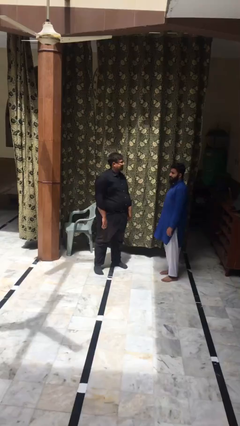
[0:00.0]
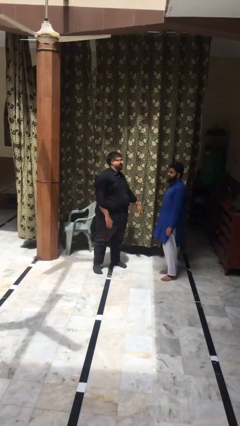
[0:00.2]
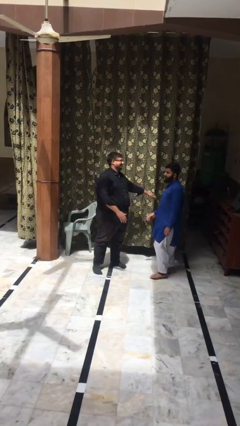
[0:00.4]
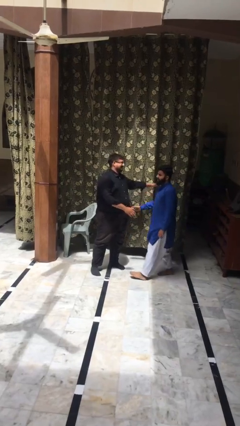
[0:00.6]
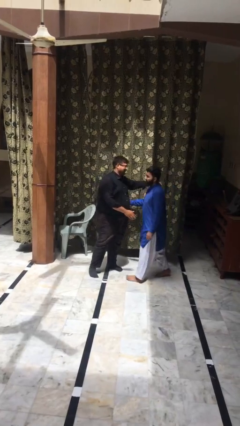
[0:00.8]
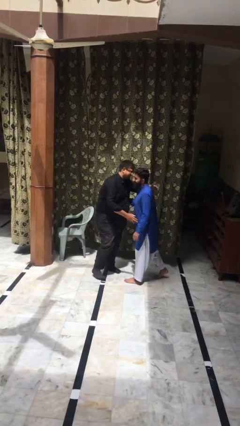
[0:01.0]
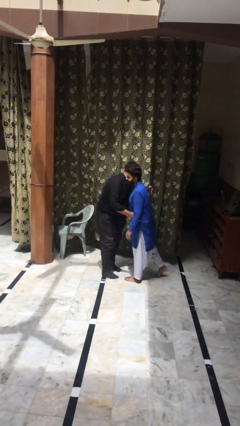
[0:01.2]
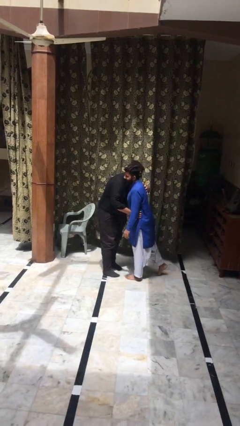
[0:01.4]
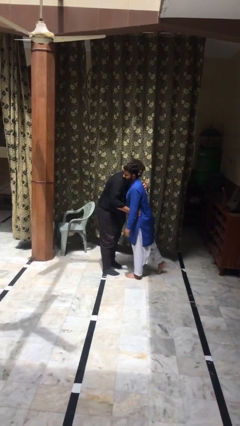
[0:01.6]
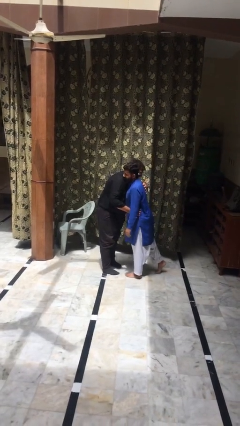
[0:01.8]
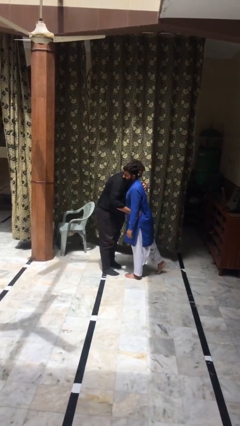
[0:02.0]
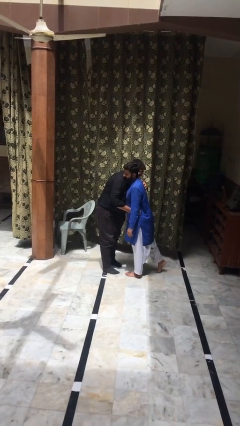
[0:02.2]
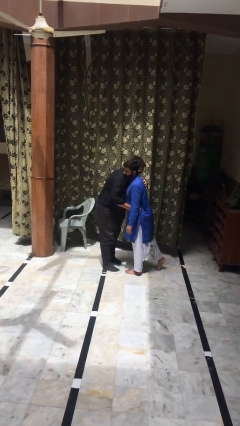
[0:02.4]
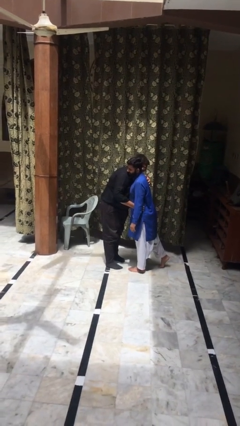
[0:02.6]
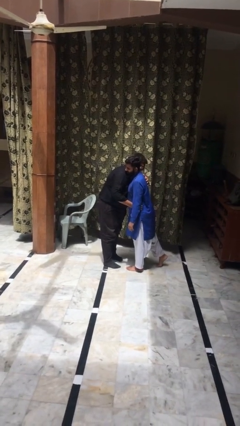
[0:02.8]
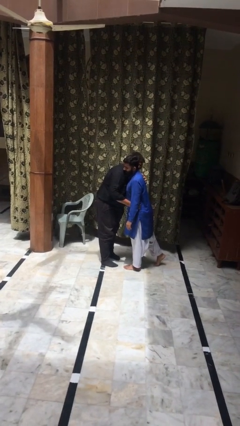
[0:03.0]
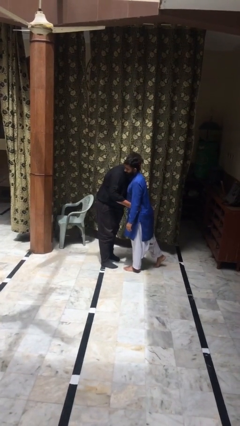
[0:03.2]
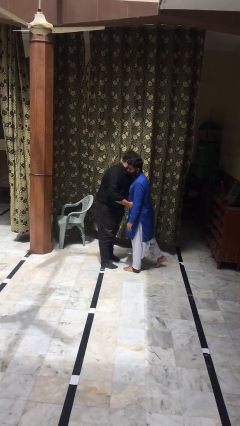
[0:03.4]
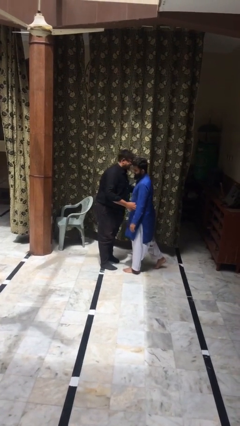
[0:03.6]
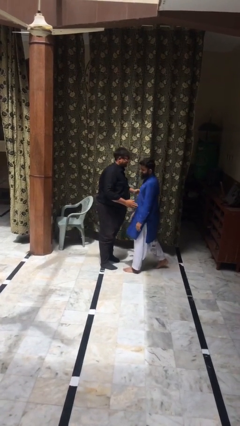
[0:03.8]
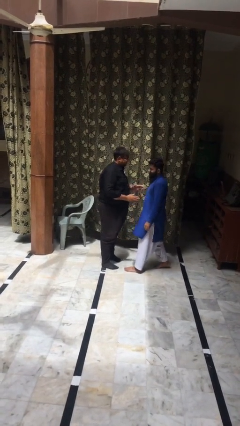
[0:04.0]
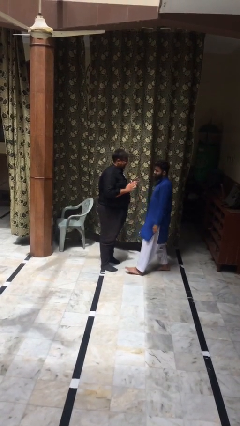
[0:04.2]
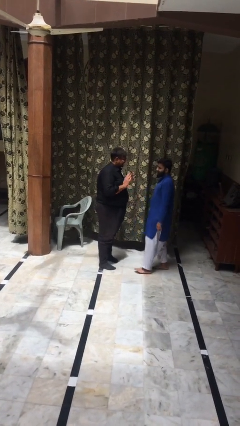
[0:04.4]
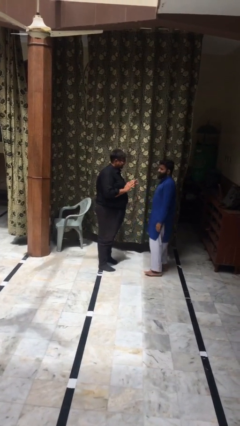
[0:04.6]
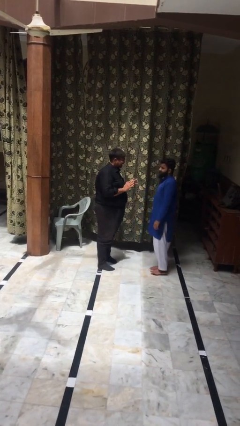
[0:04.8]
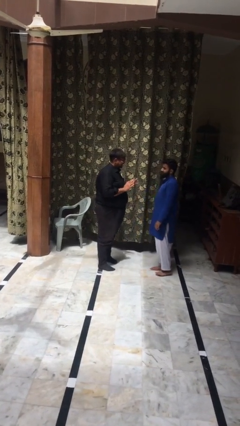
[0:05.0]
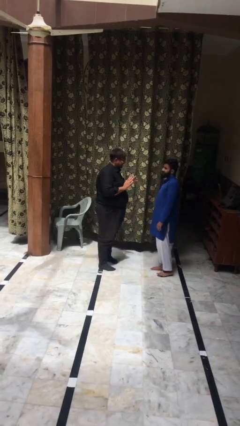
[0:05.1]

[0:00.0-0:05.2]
person embraces person

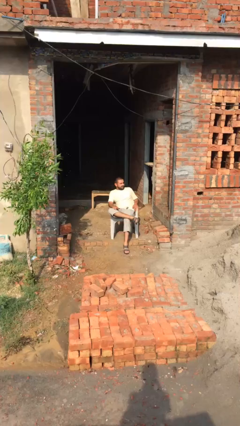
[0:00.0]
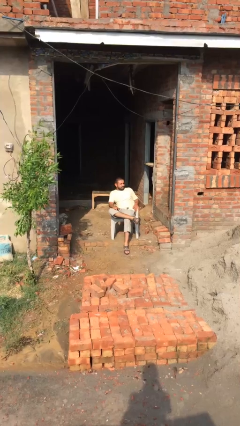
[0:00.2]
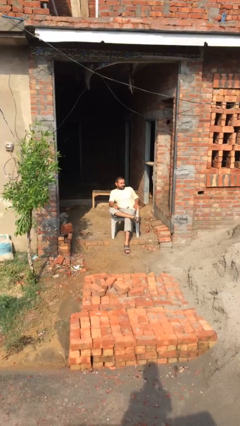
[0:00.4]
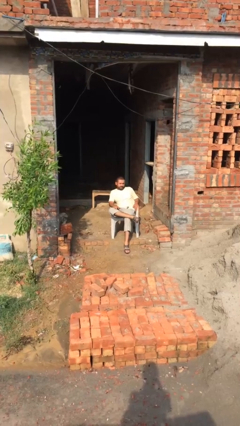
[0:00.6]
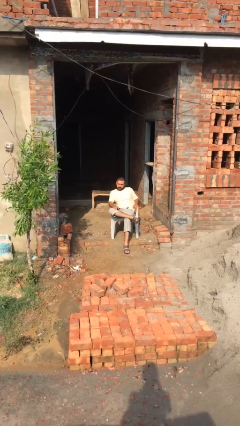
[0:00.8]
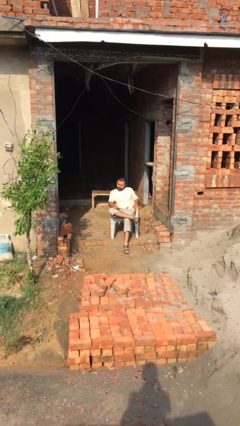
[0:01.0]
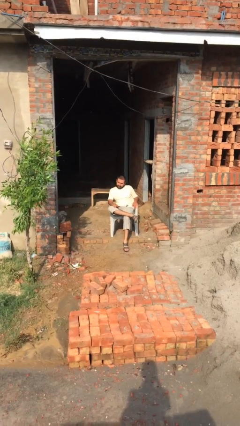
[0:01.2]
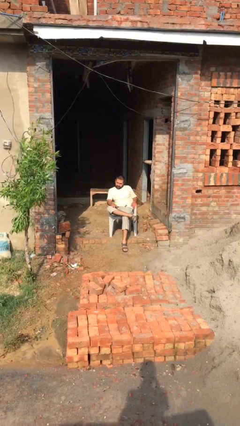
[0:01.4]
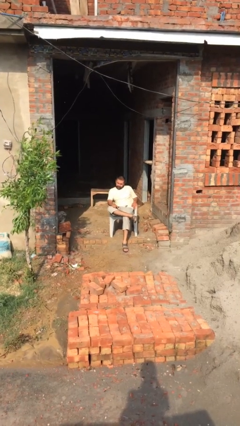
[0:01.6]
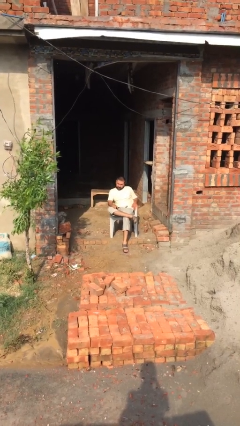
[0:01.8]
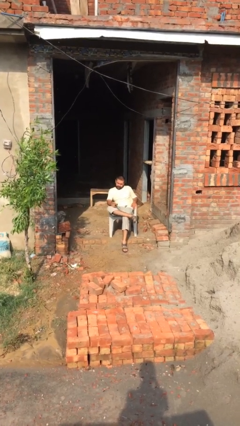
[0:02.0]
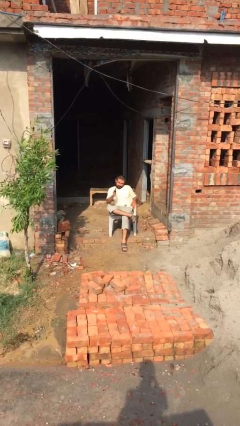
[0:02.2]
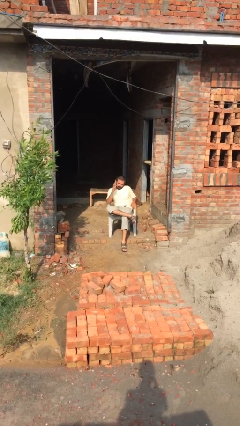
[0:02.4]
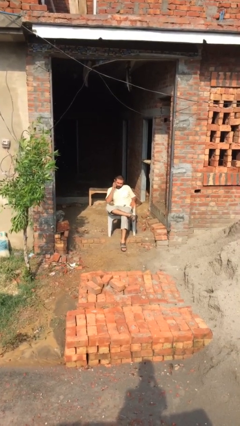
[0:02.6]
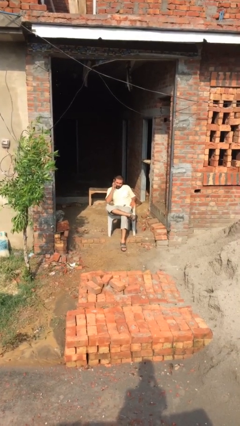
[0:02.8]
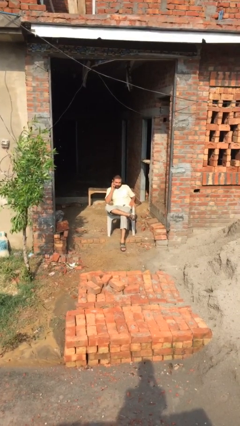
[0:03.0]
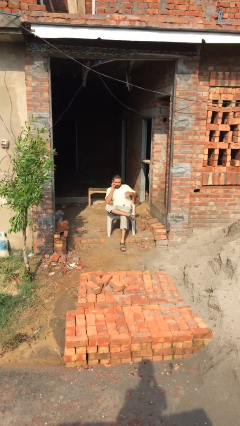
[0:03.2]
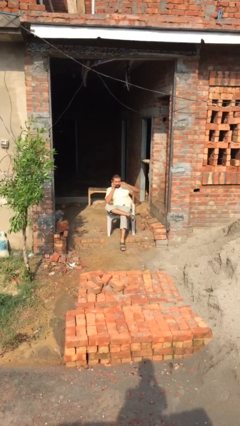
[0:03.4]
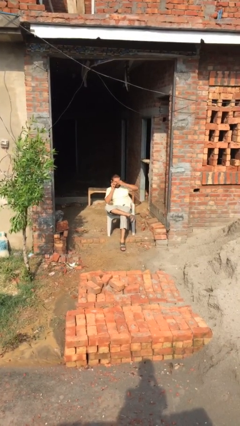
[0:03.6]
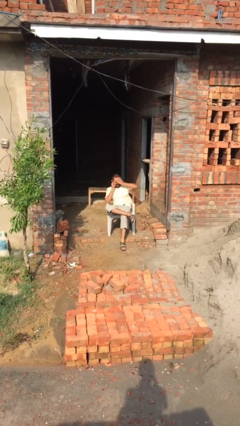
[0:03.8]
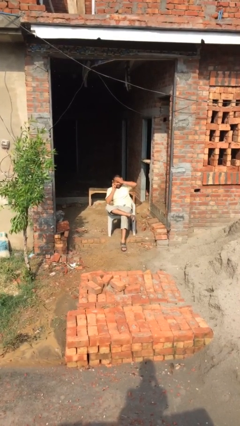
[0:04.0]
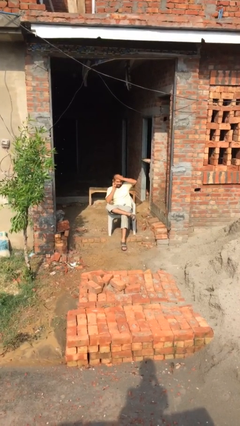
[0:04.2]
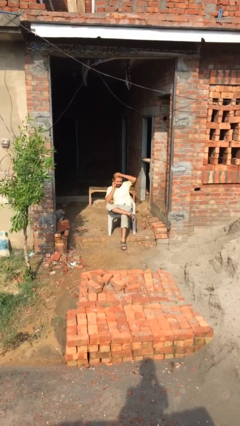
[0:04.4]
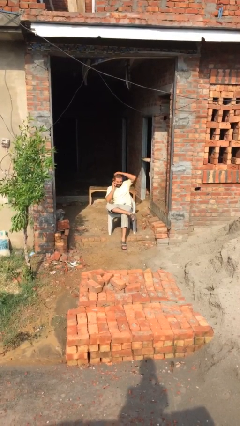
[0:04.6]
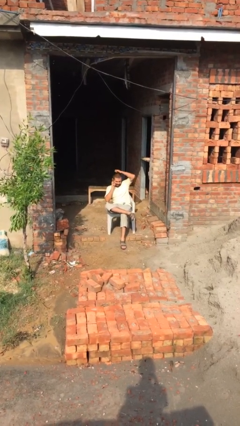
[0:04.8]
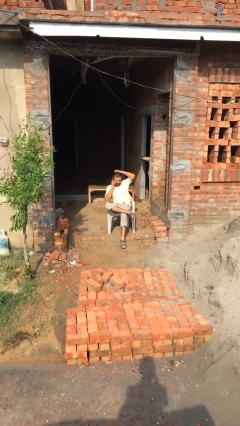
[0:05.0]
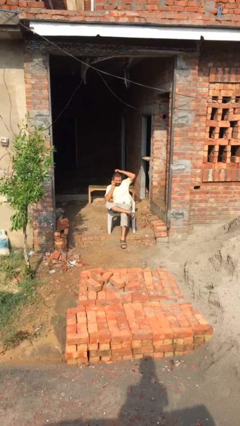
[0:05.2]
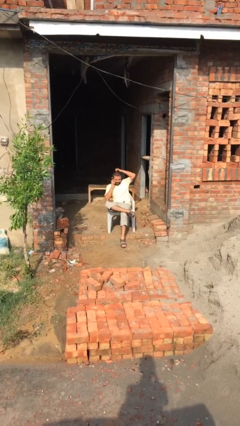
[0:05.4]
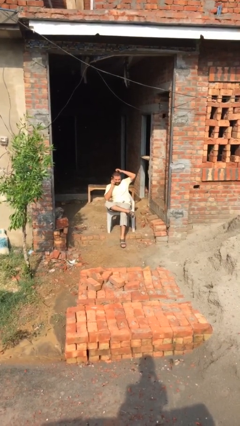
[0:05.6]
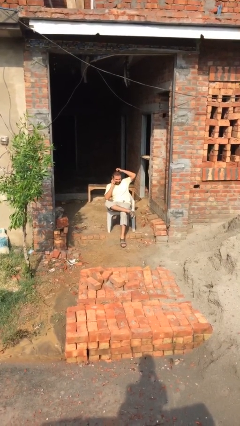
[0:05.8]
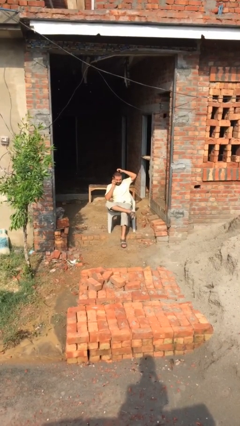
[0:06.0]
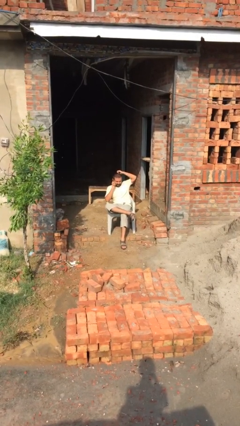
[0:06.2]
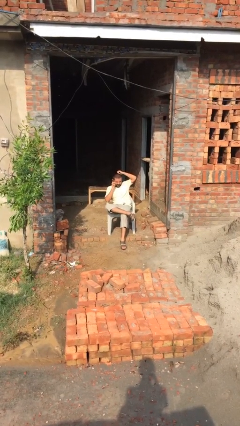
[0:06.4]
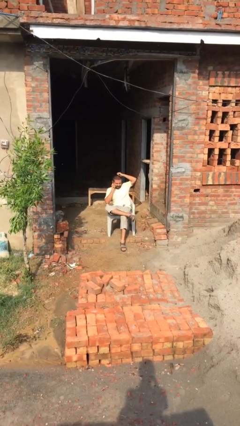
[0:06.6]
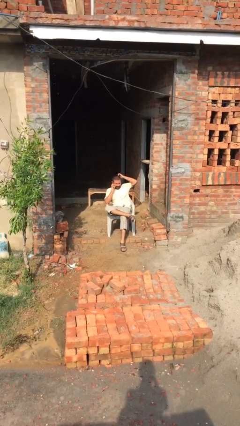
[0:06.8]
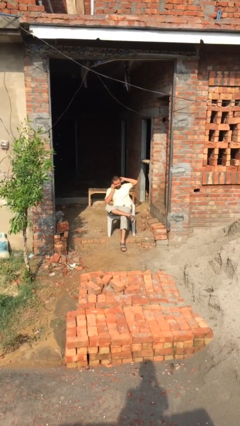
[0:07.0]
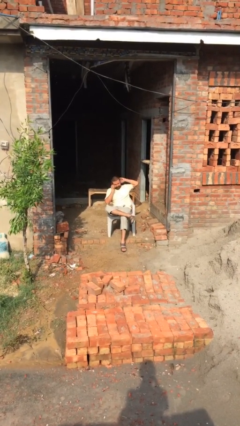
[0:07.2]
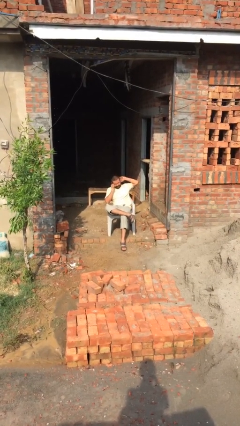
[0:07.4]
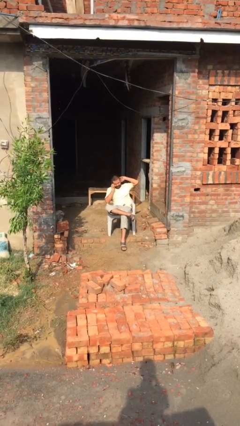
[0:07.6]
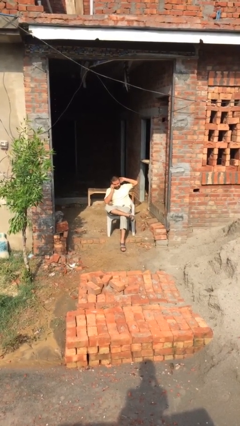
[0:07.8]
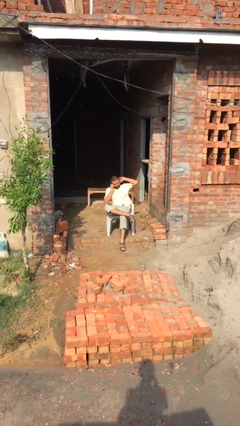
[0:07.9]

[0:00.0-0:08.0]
person talks on phone

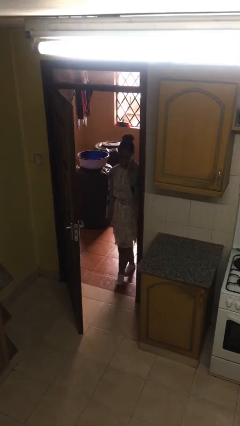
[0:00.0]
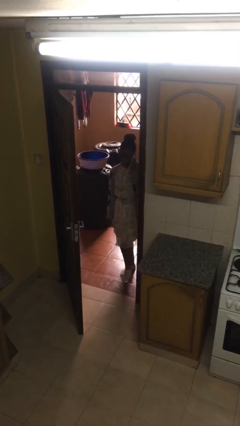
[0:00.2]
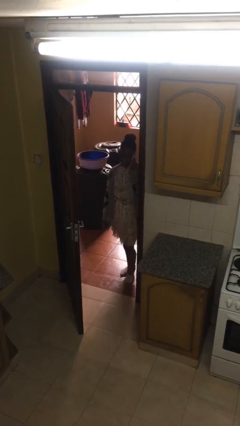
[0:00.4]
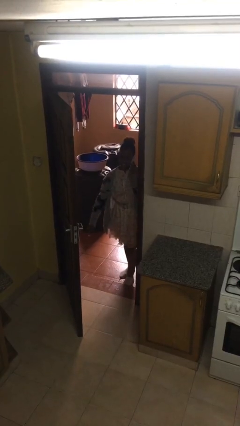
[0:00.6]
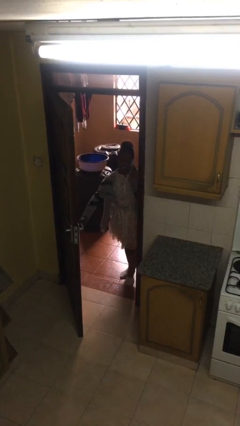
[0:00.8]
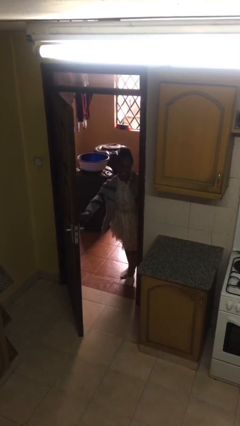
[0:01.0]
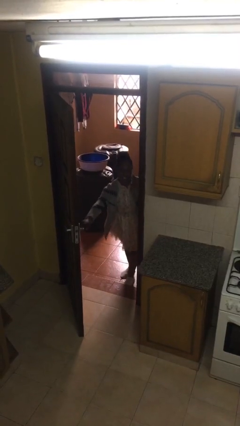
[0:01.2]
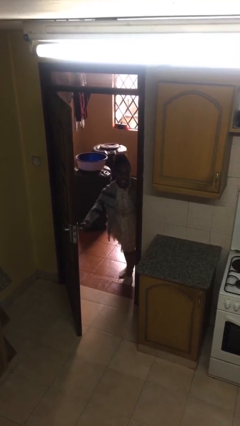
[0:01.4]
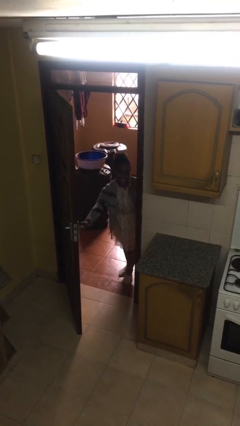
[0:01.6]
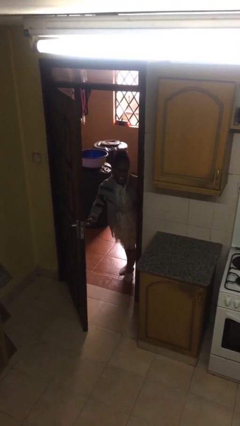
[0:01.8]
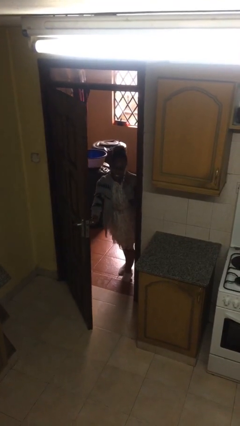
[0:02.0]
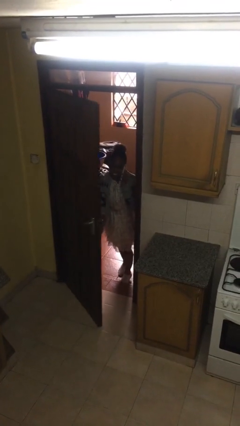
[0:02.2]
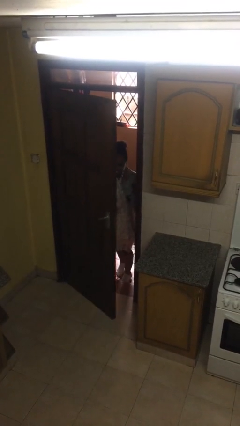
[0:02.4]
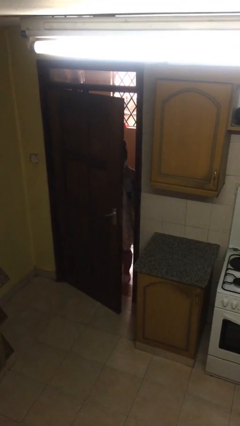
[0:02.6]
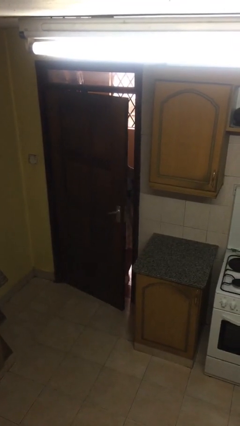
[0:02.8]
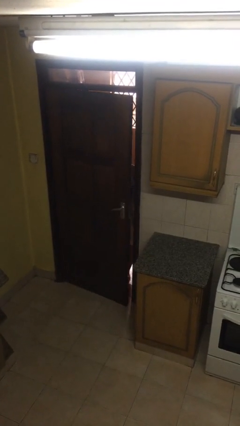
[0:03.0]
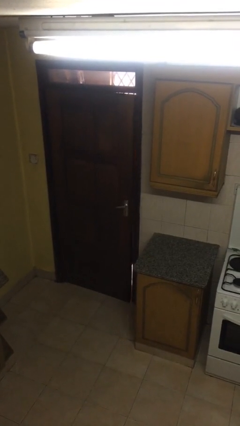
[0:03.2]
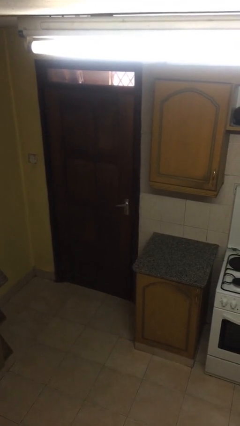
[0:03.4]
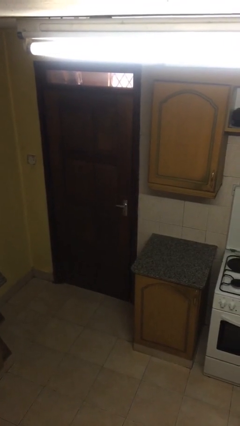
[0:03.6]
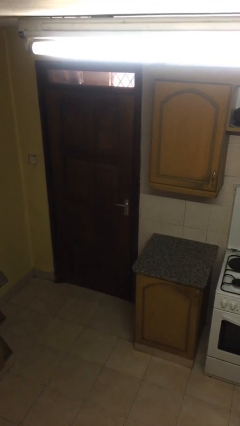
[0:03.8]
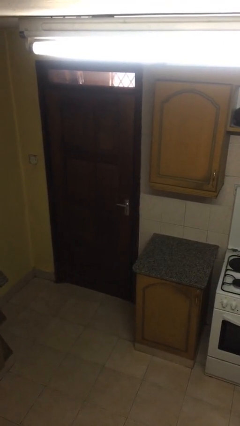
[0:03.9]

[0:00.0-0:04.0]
person closes facility door

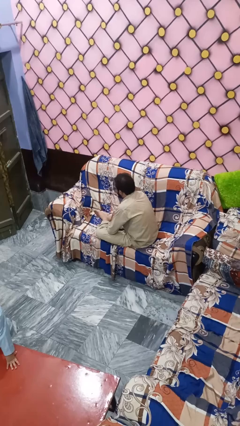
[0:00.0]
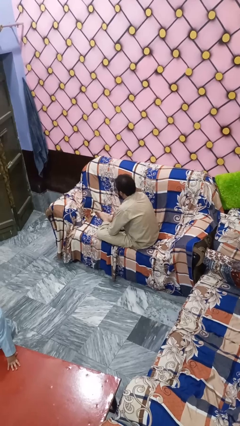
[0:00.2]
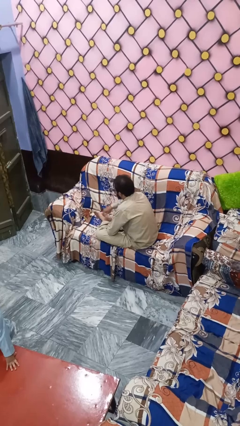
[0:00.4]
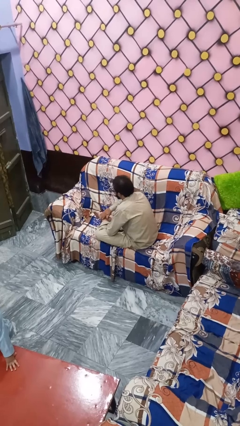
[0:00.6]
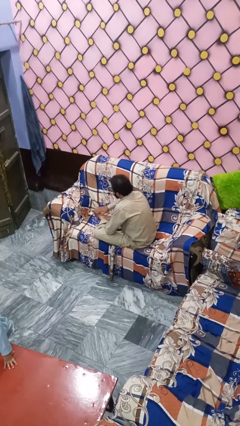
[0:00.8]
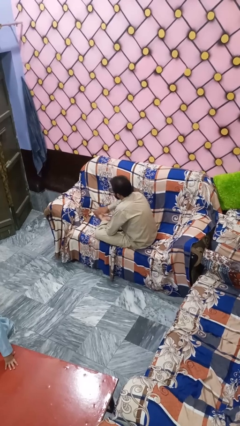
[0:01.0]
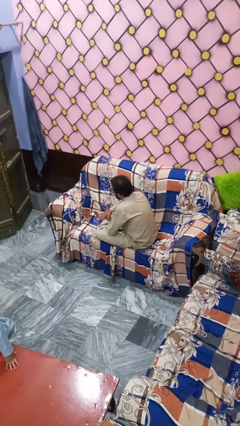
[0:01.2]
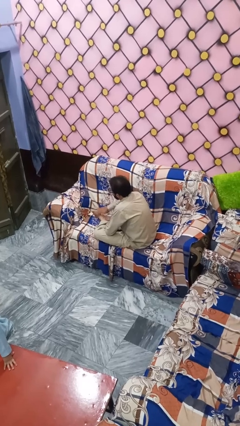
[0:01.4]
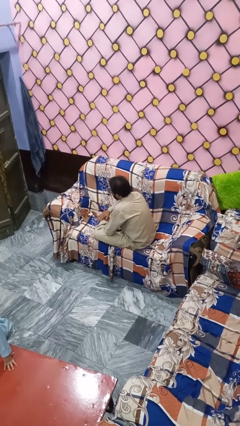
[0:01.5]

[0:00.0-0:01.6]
person rubs foot
